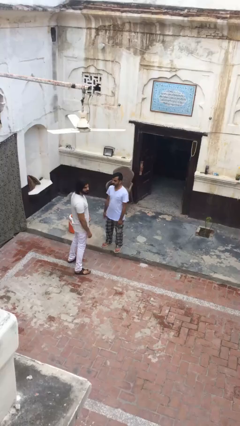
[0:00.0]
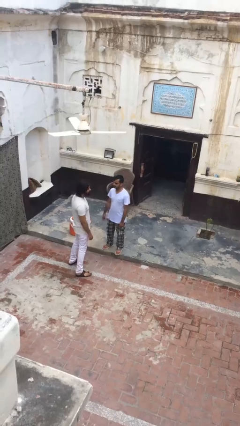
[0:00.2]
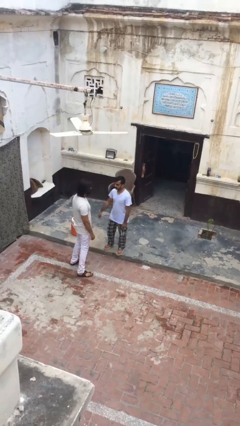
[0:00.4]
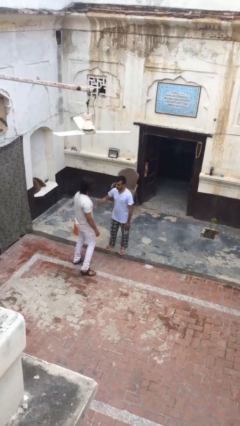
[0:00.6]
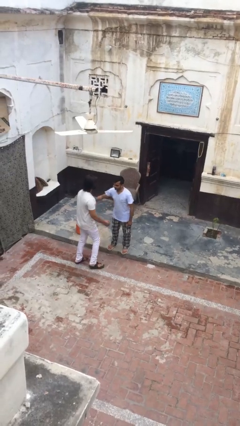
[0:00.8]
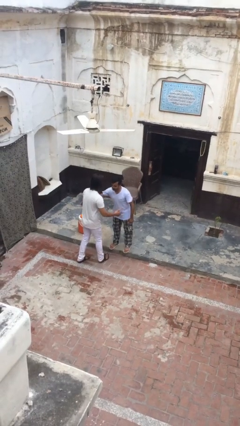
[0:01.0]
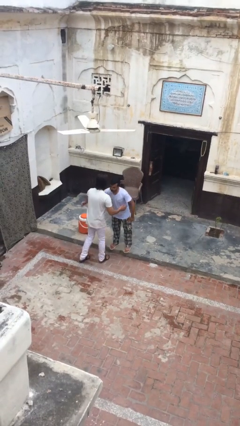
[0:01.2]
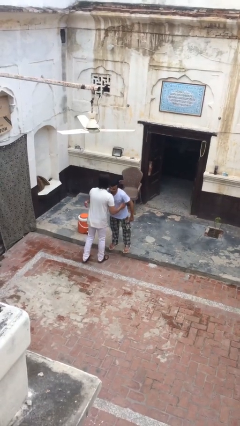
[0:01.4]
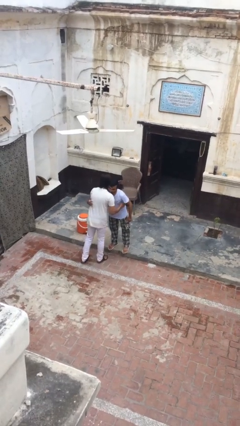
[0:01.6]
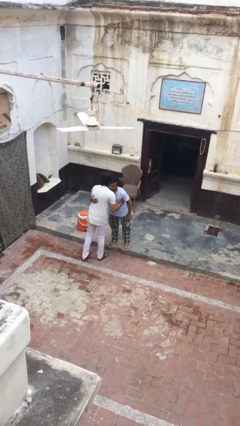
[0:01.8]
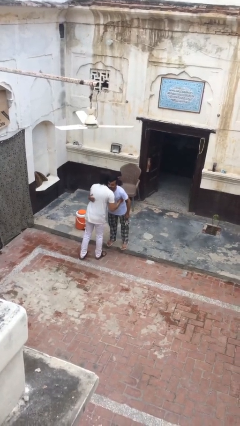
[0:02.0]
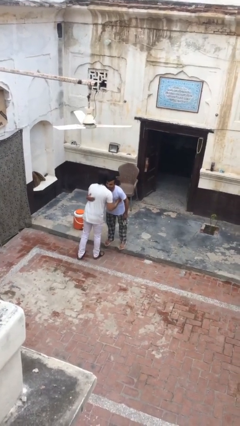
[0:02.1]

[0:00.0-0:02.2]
person embraces person

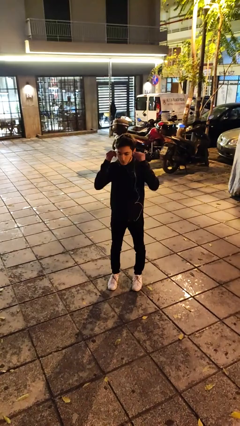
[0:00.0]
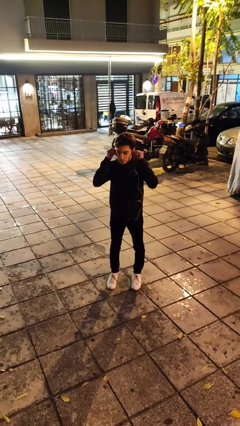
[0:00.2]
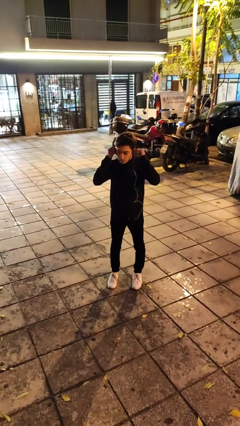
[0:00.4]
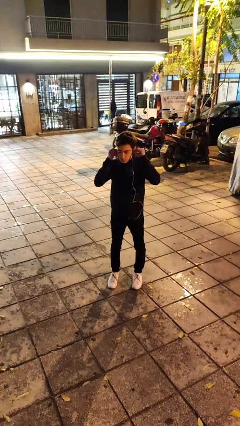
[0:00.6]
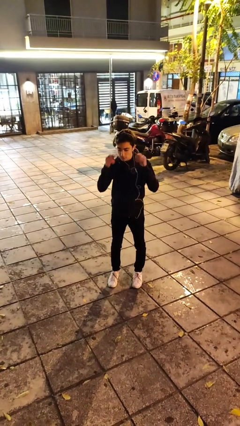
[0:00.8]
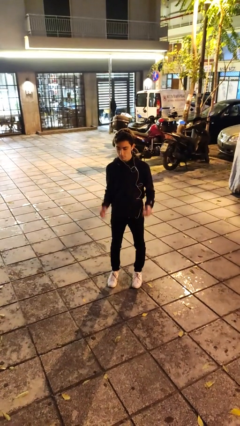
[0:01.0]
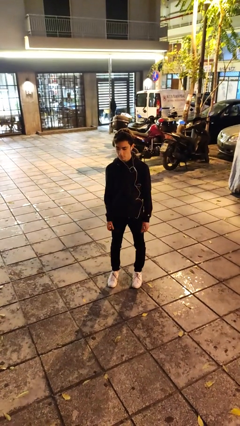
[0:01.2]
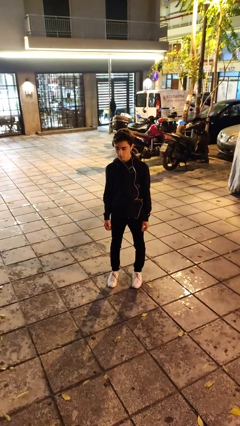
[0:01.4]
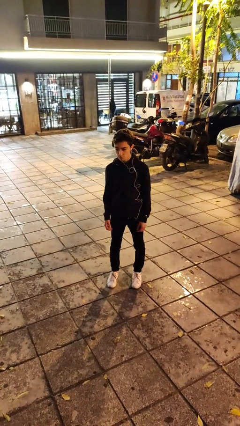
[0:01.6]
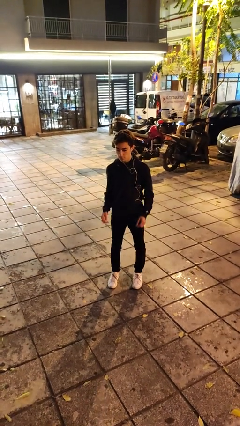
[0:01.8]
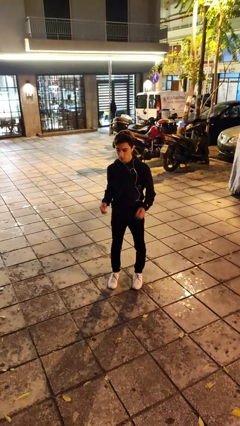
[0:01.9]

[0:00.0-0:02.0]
person puts on headphones

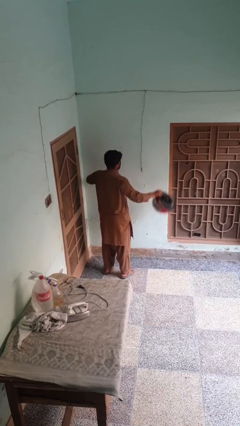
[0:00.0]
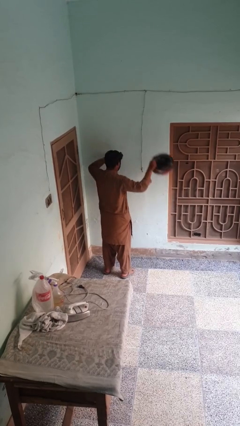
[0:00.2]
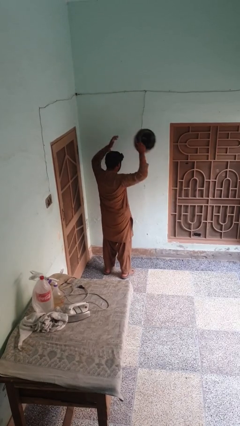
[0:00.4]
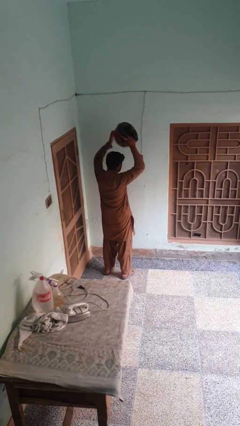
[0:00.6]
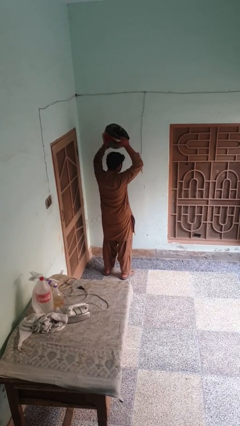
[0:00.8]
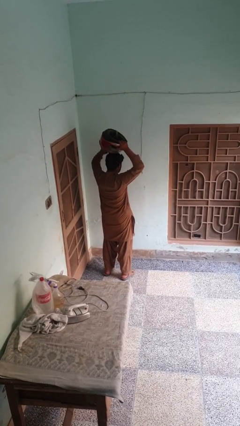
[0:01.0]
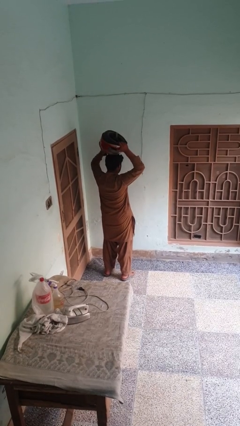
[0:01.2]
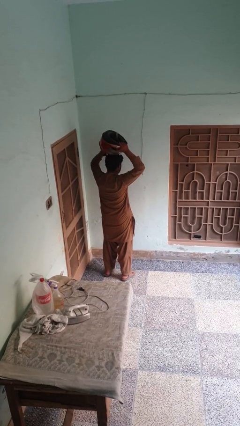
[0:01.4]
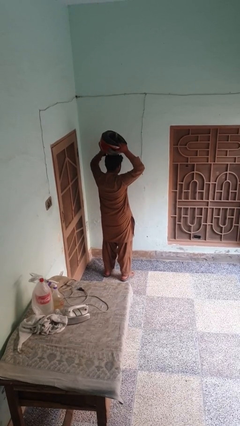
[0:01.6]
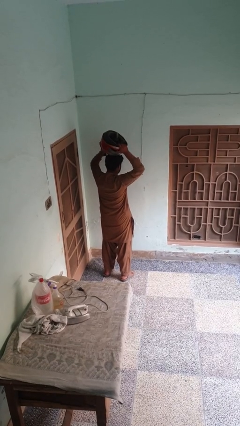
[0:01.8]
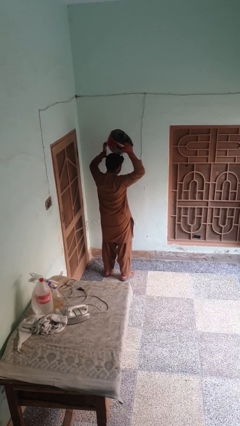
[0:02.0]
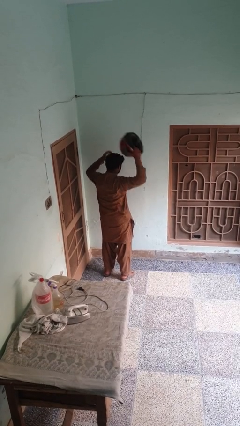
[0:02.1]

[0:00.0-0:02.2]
person holds object above head

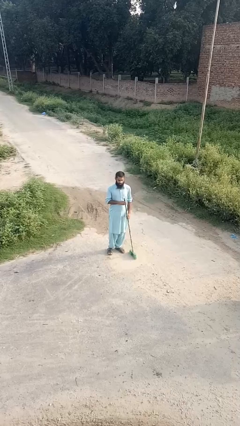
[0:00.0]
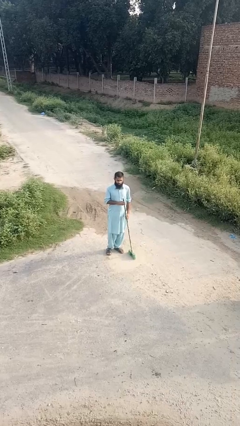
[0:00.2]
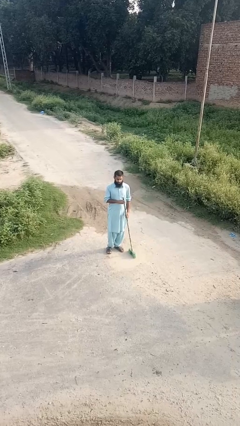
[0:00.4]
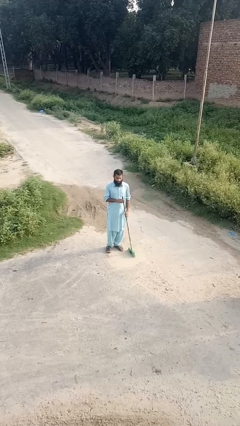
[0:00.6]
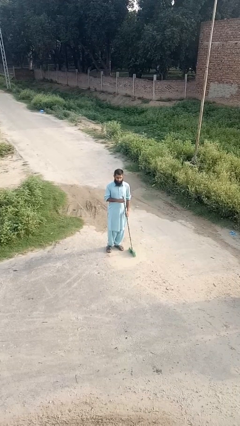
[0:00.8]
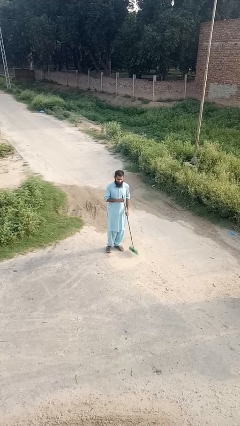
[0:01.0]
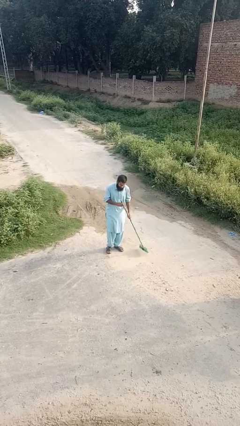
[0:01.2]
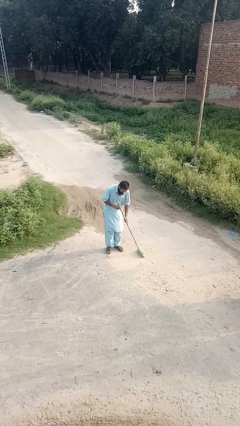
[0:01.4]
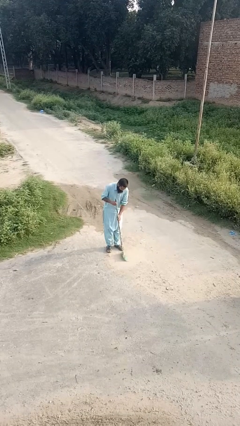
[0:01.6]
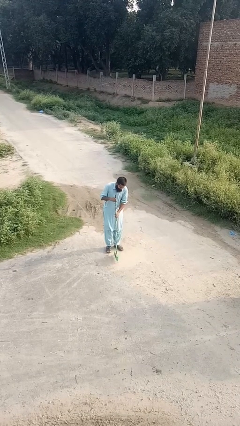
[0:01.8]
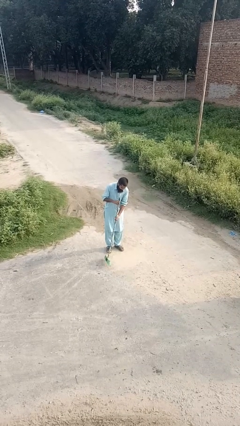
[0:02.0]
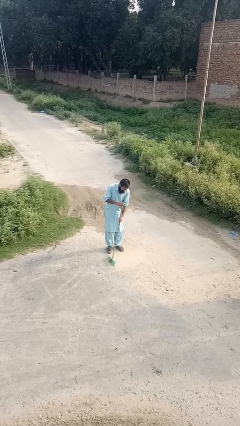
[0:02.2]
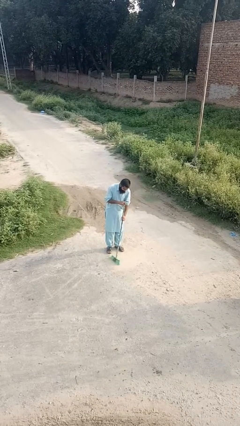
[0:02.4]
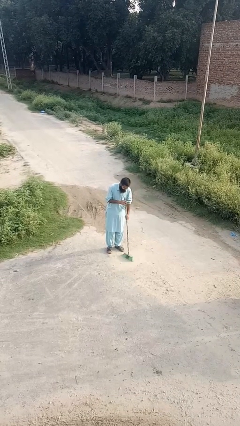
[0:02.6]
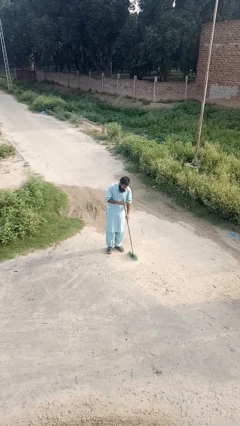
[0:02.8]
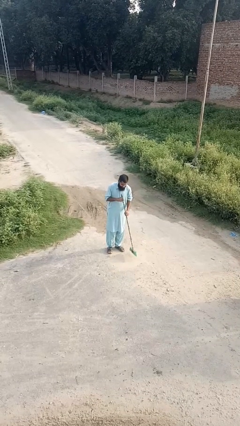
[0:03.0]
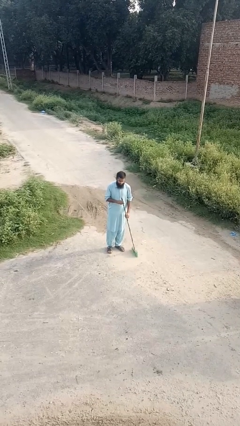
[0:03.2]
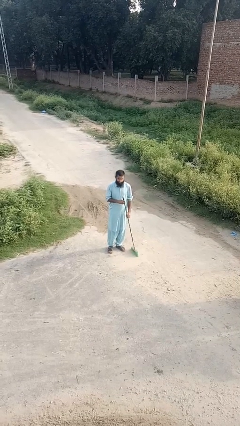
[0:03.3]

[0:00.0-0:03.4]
person sweeps floor

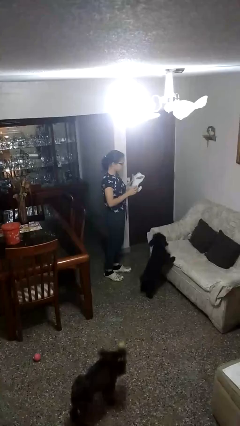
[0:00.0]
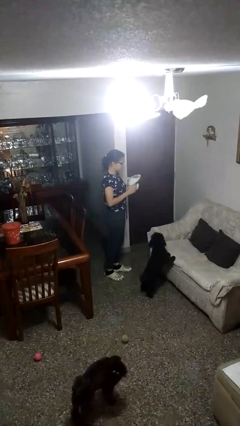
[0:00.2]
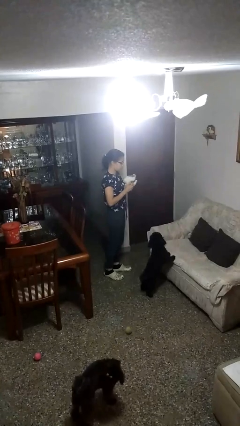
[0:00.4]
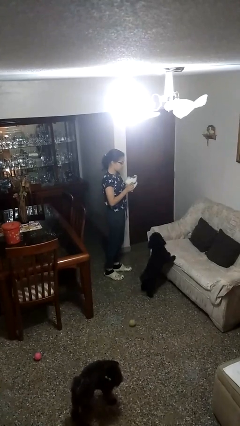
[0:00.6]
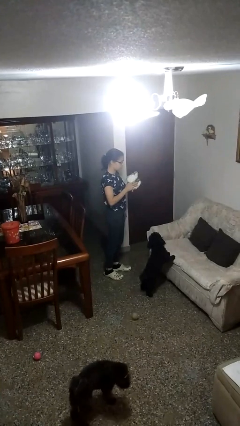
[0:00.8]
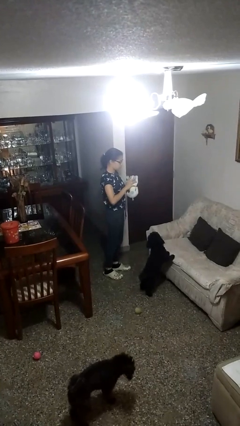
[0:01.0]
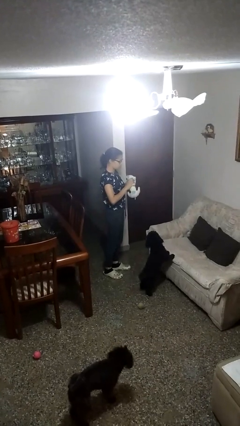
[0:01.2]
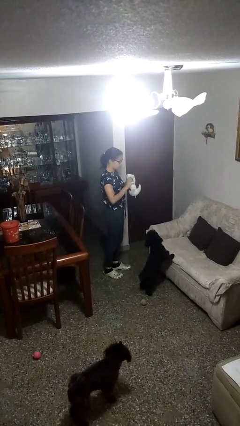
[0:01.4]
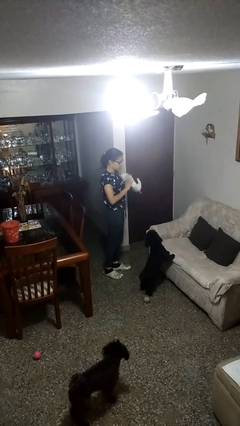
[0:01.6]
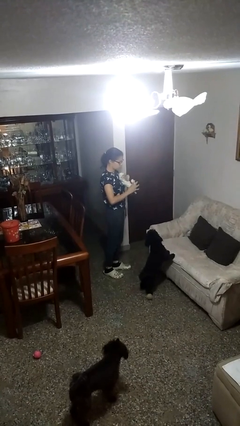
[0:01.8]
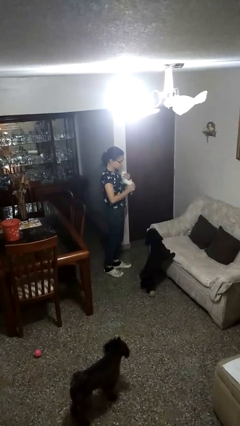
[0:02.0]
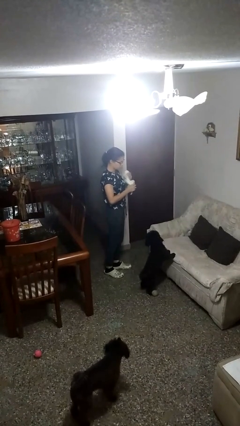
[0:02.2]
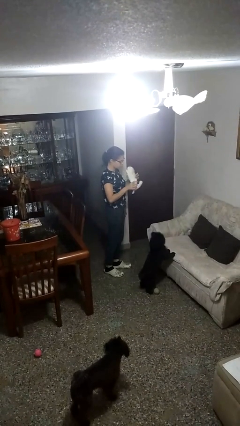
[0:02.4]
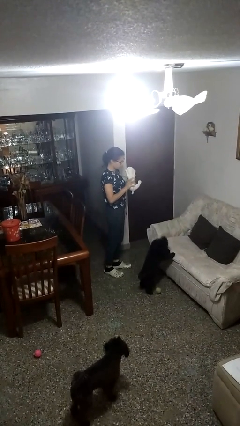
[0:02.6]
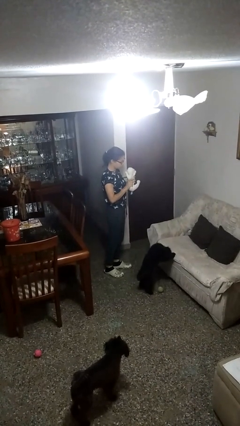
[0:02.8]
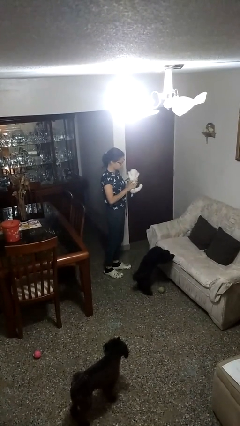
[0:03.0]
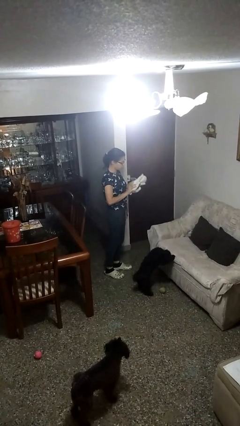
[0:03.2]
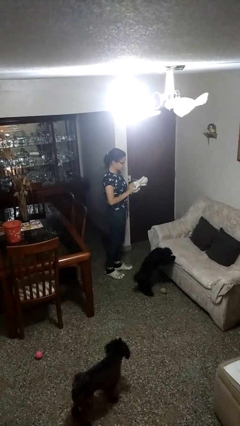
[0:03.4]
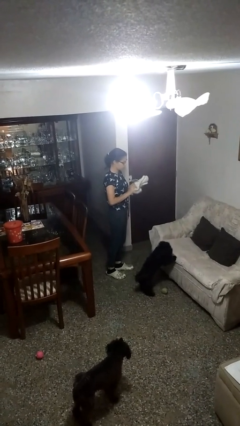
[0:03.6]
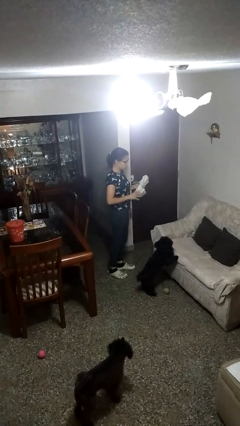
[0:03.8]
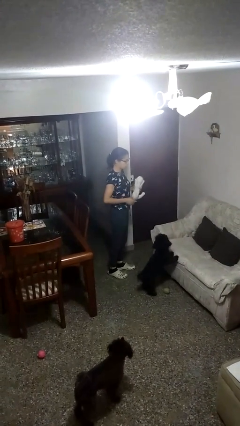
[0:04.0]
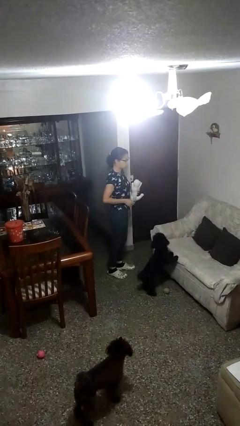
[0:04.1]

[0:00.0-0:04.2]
person squeezes object

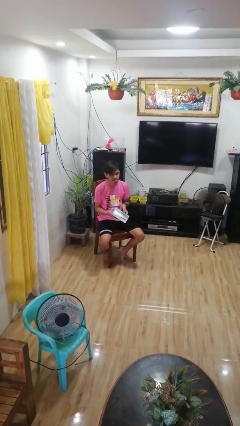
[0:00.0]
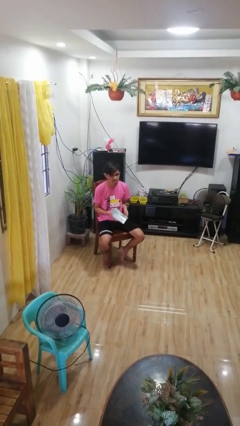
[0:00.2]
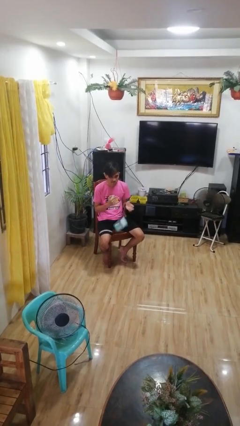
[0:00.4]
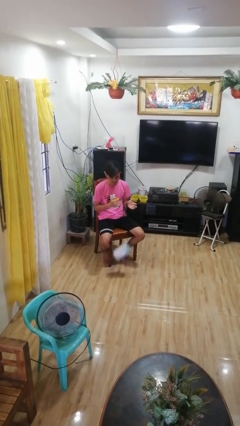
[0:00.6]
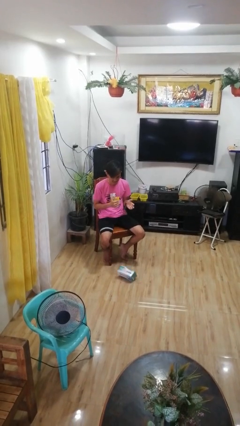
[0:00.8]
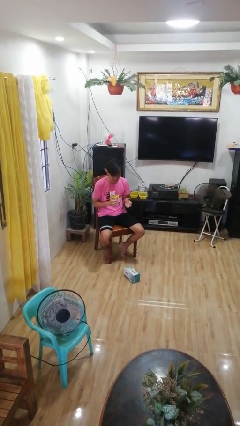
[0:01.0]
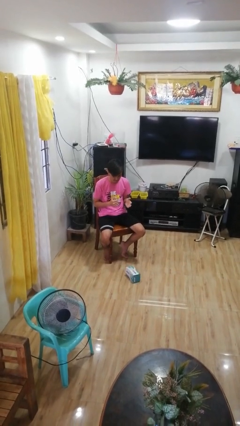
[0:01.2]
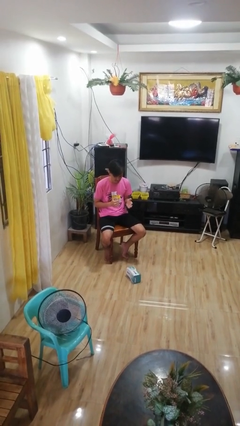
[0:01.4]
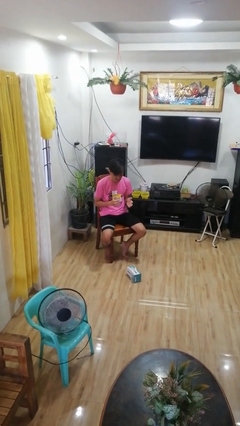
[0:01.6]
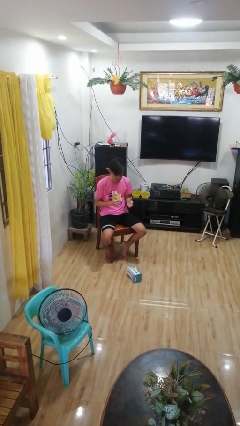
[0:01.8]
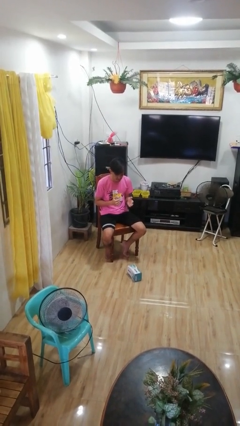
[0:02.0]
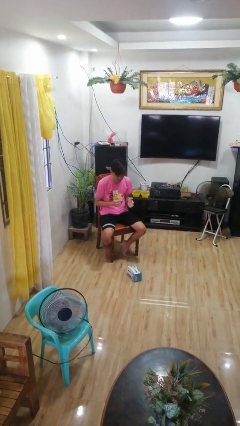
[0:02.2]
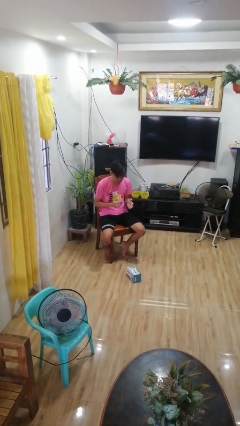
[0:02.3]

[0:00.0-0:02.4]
person drops object

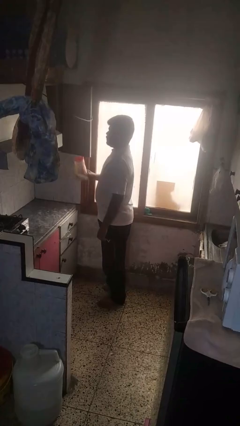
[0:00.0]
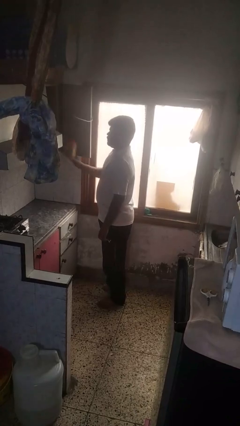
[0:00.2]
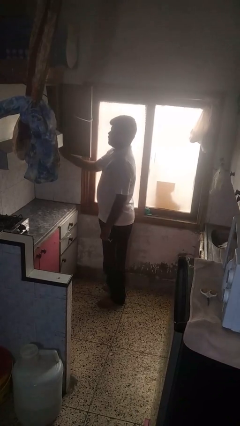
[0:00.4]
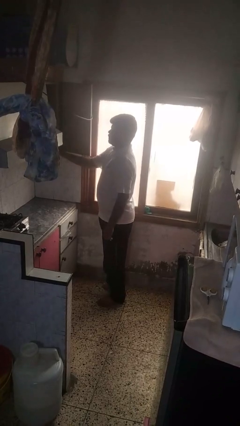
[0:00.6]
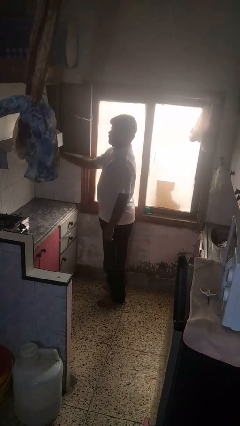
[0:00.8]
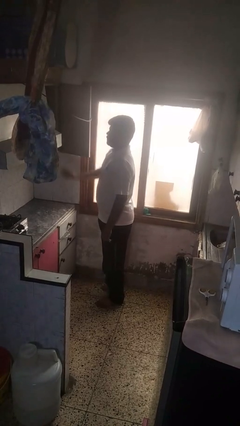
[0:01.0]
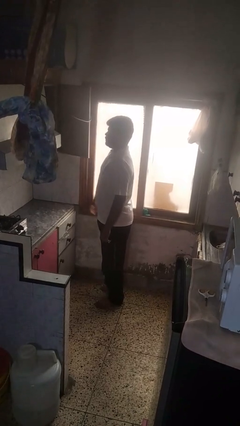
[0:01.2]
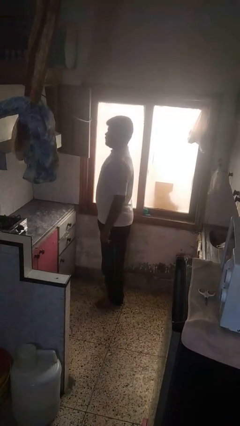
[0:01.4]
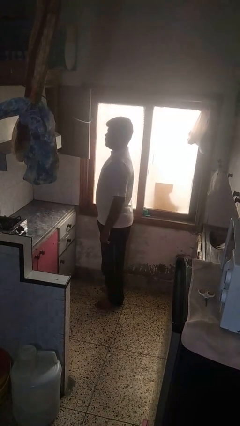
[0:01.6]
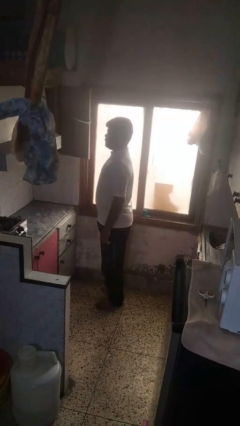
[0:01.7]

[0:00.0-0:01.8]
person puts down object into cabinet
